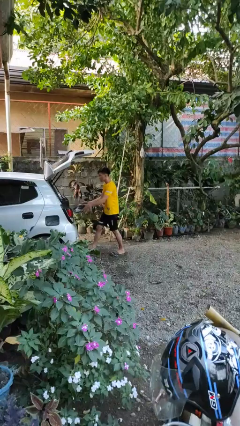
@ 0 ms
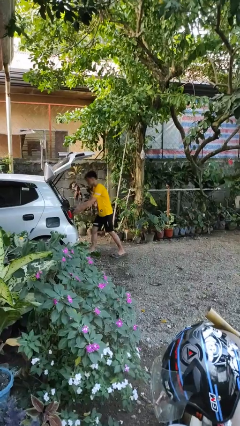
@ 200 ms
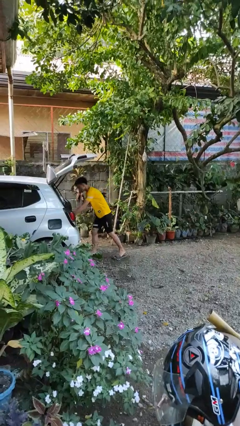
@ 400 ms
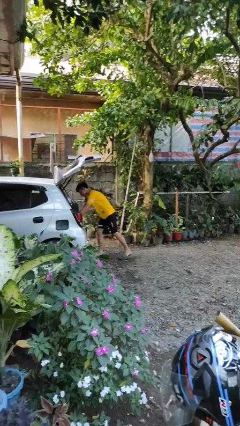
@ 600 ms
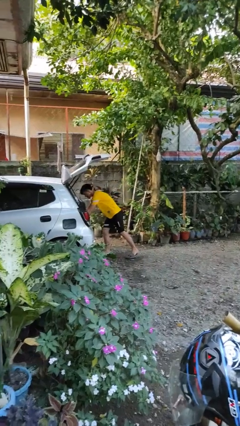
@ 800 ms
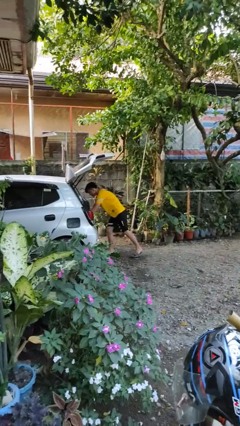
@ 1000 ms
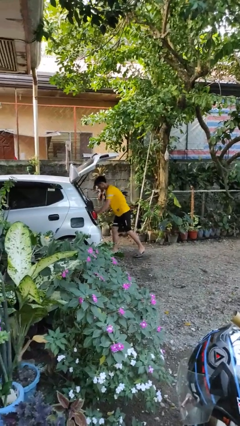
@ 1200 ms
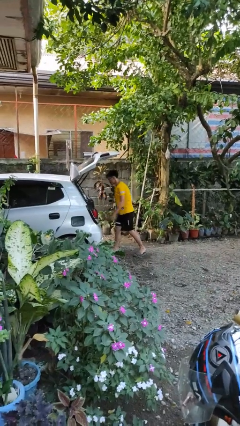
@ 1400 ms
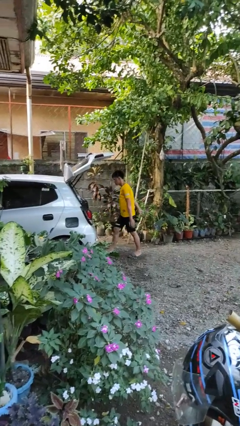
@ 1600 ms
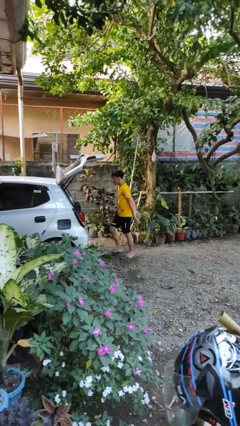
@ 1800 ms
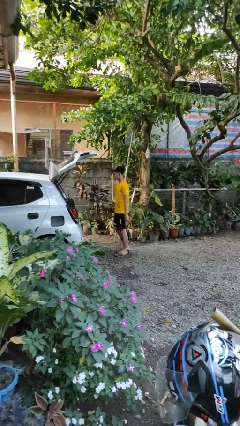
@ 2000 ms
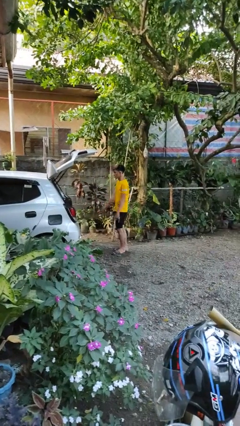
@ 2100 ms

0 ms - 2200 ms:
person loads car

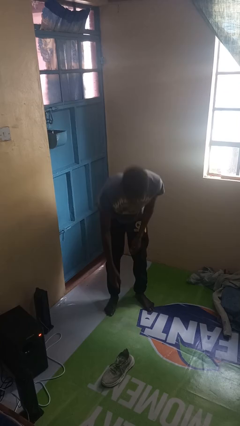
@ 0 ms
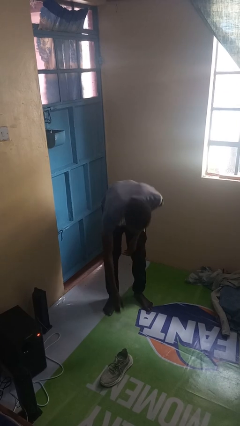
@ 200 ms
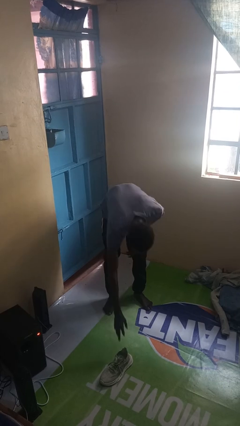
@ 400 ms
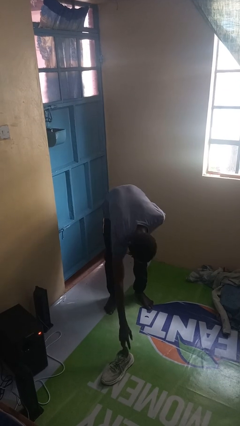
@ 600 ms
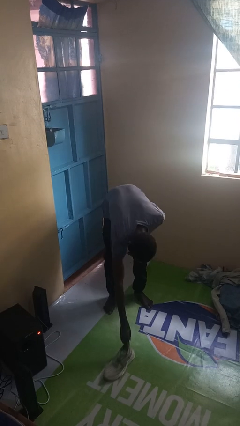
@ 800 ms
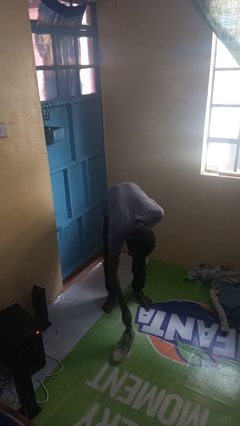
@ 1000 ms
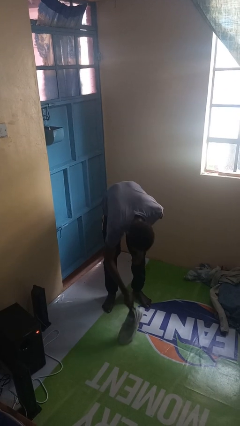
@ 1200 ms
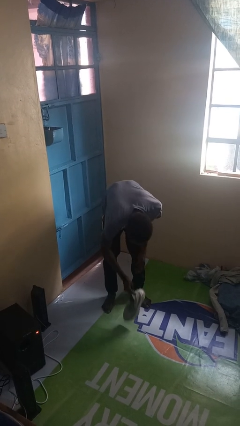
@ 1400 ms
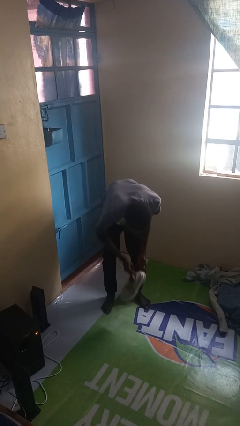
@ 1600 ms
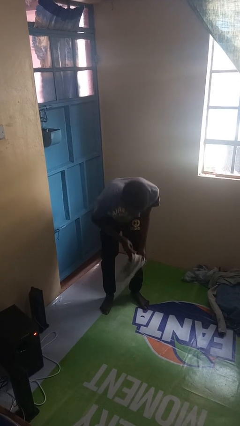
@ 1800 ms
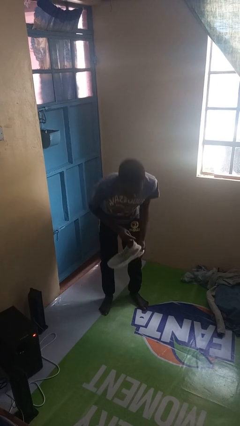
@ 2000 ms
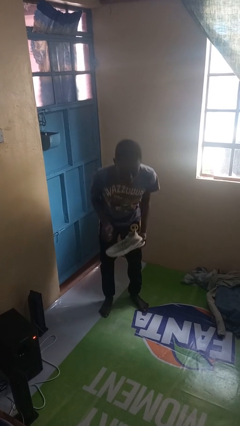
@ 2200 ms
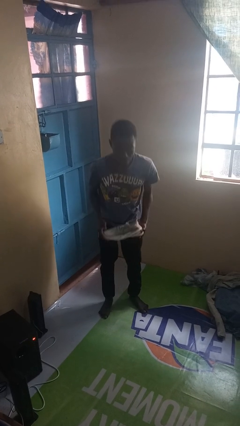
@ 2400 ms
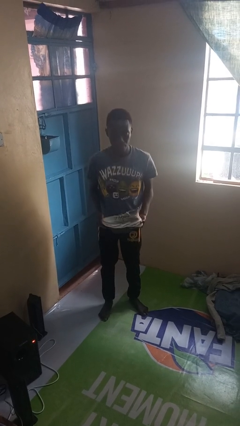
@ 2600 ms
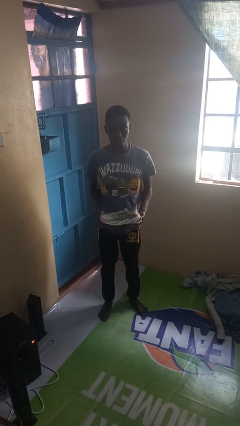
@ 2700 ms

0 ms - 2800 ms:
person picks up object from floor

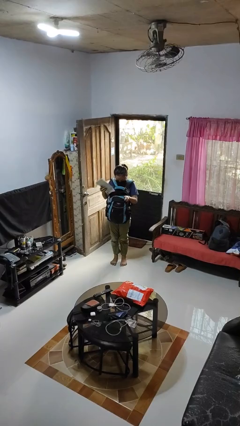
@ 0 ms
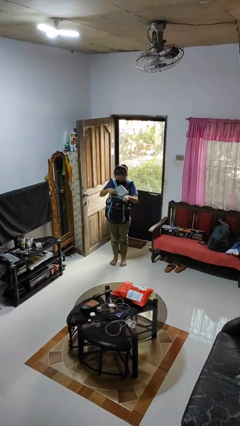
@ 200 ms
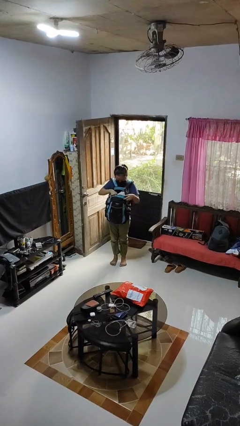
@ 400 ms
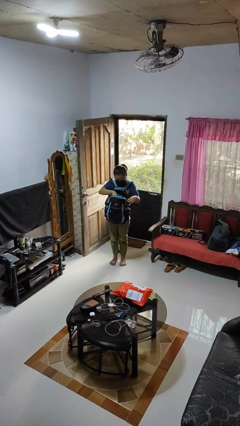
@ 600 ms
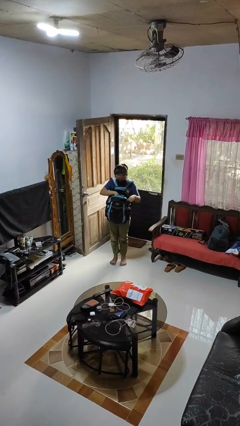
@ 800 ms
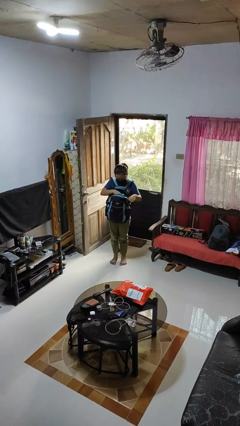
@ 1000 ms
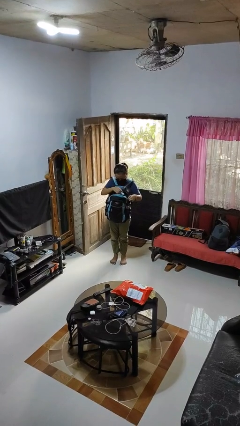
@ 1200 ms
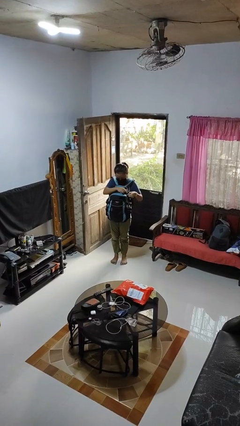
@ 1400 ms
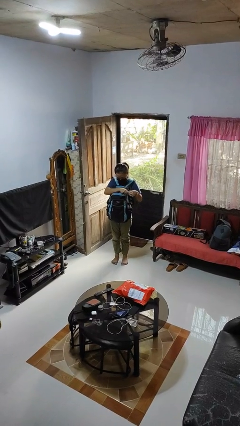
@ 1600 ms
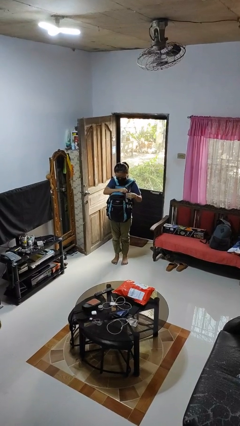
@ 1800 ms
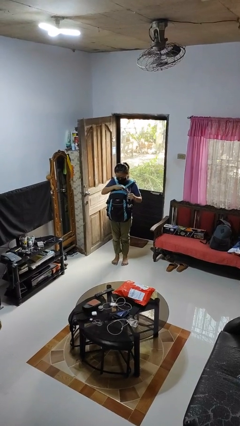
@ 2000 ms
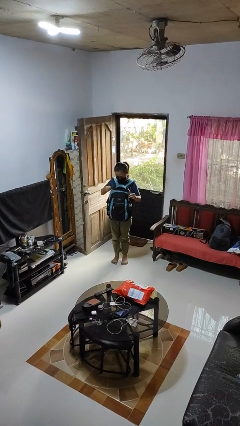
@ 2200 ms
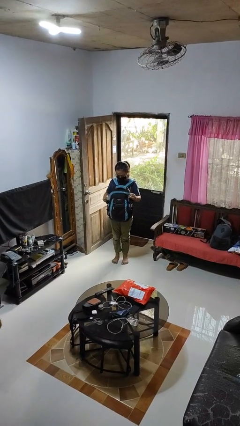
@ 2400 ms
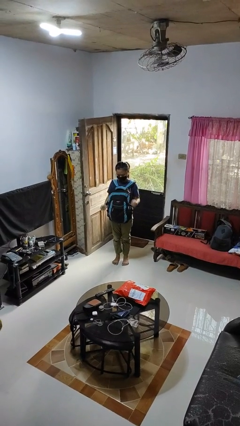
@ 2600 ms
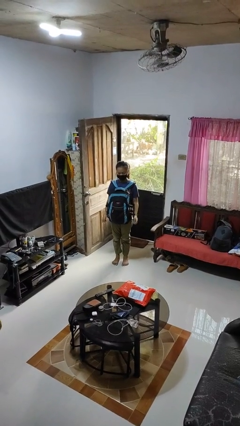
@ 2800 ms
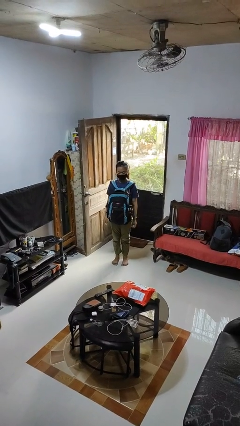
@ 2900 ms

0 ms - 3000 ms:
person puts object into backpack

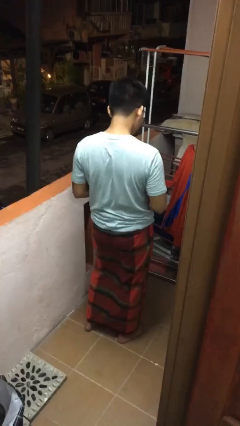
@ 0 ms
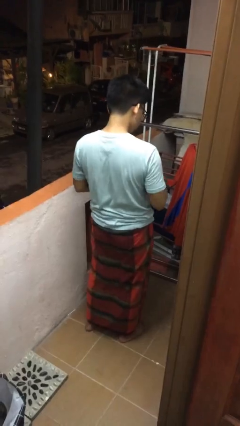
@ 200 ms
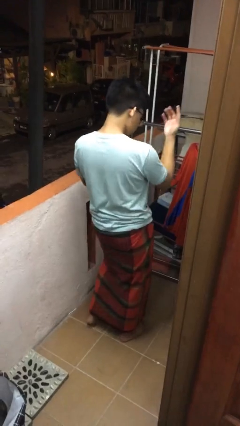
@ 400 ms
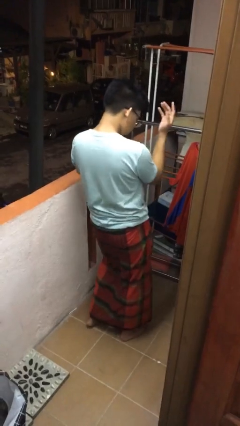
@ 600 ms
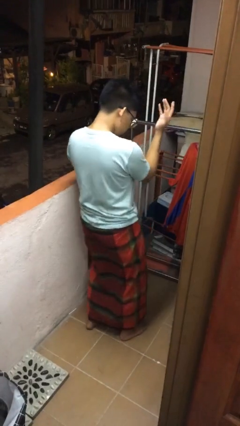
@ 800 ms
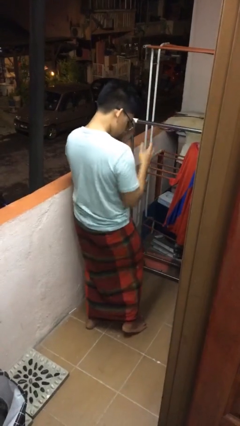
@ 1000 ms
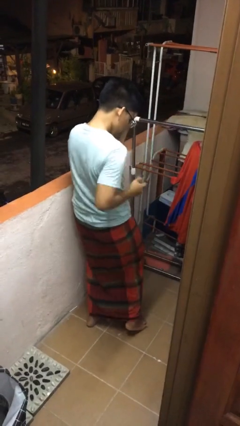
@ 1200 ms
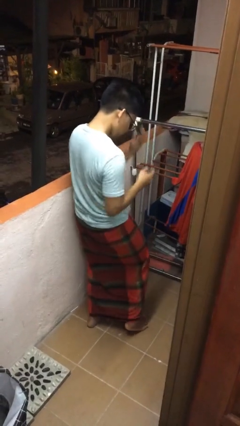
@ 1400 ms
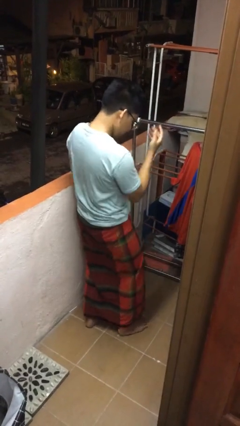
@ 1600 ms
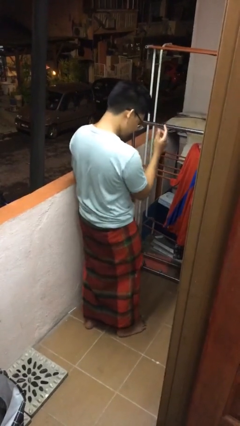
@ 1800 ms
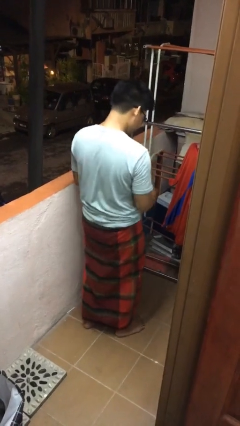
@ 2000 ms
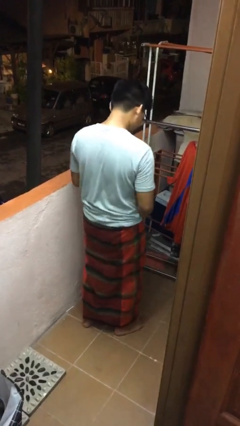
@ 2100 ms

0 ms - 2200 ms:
person dances in place

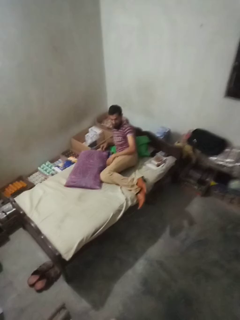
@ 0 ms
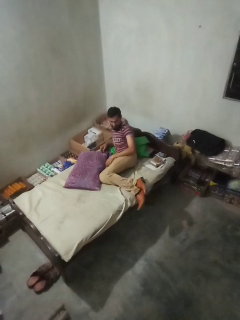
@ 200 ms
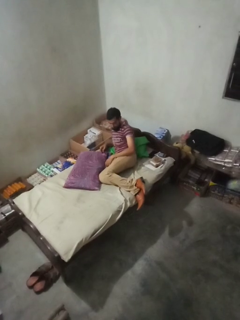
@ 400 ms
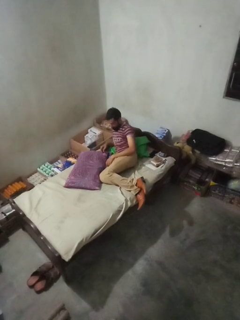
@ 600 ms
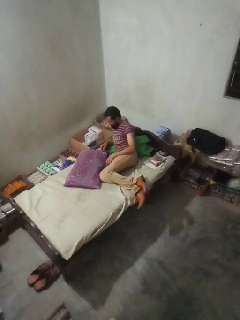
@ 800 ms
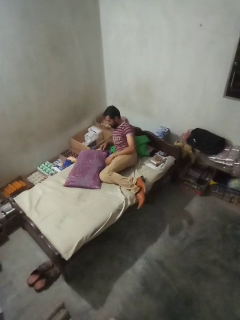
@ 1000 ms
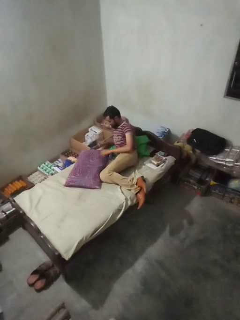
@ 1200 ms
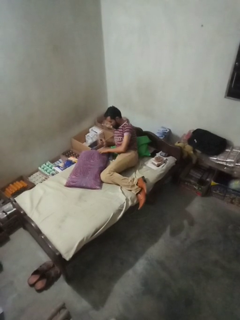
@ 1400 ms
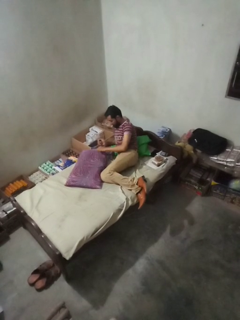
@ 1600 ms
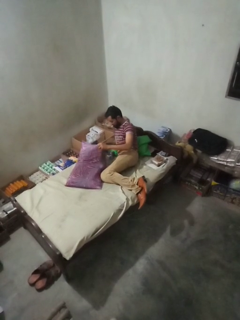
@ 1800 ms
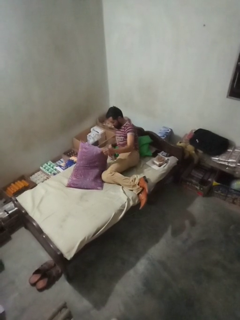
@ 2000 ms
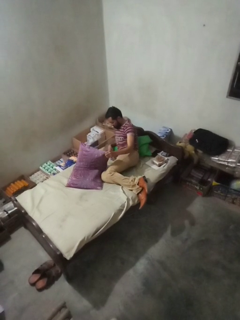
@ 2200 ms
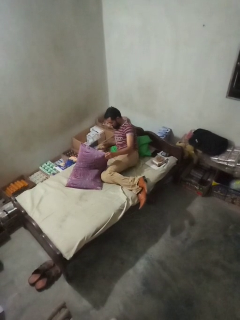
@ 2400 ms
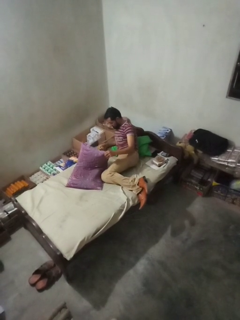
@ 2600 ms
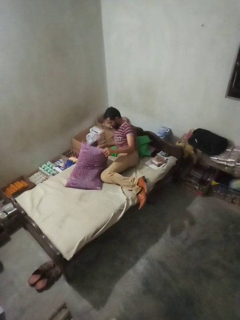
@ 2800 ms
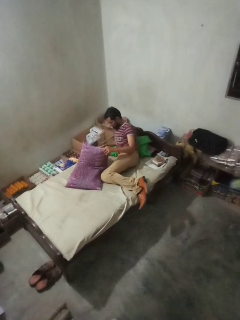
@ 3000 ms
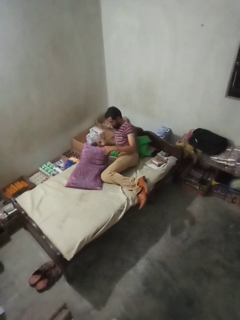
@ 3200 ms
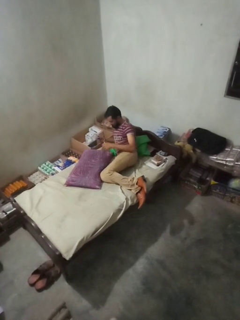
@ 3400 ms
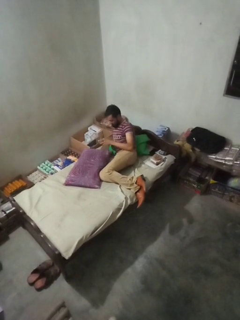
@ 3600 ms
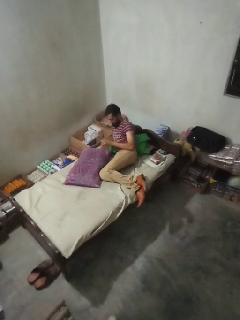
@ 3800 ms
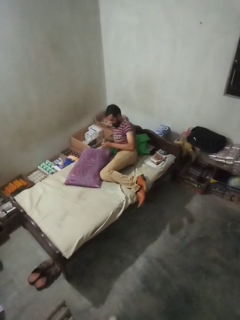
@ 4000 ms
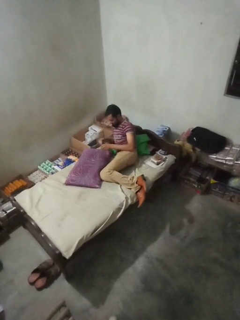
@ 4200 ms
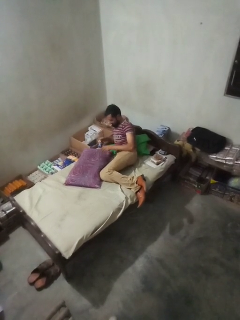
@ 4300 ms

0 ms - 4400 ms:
person searches under bed

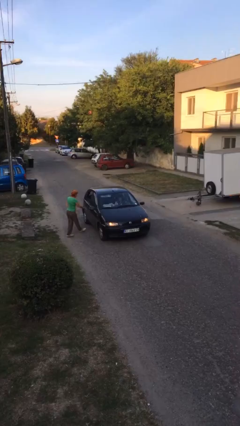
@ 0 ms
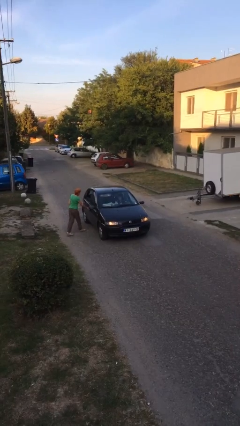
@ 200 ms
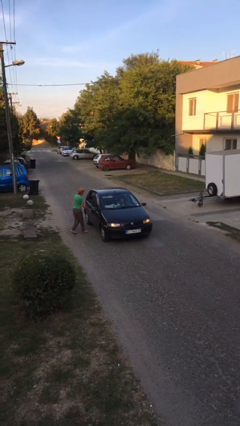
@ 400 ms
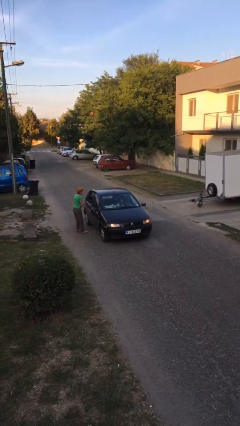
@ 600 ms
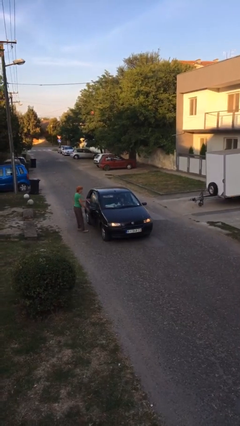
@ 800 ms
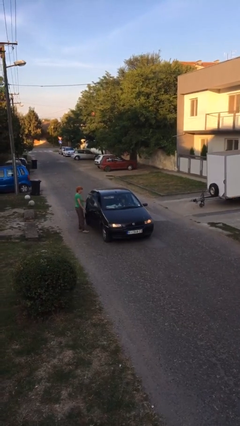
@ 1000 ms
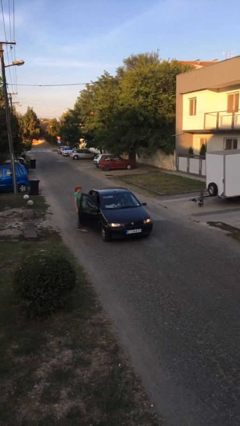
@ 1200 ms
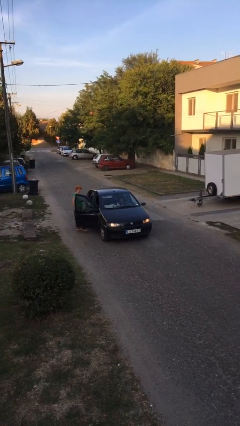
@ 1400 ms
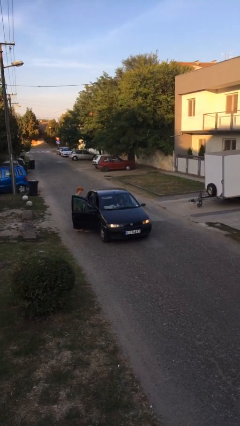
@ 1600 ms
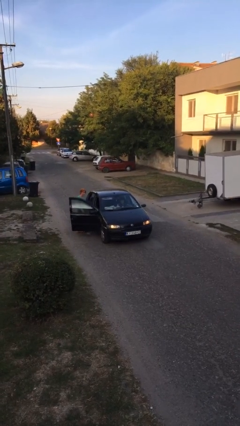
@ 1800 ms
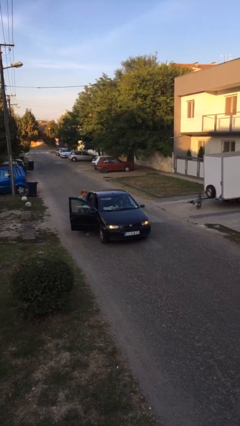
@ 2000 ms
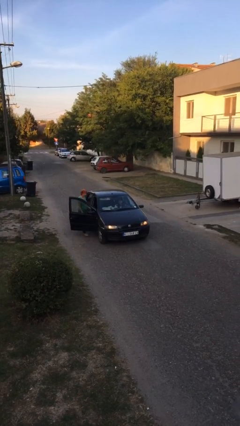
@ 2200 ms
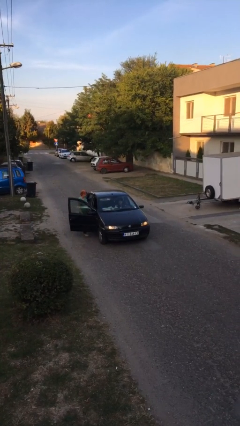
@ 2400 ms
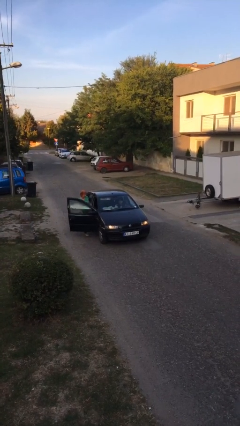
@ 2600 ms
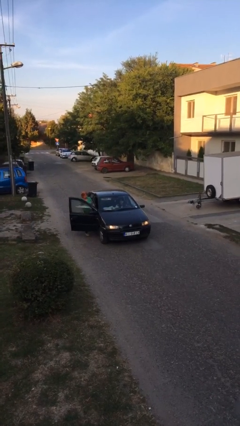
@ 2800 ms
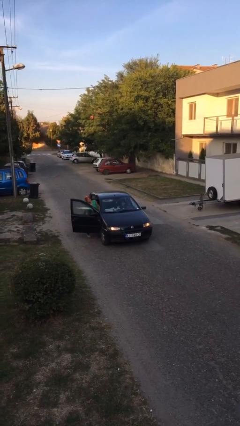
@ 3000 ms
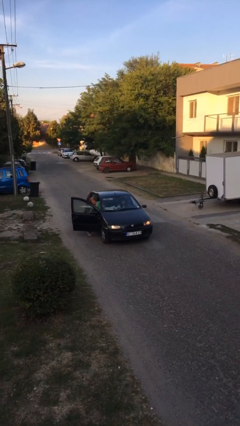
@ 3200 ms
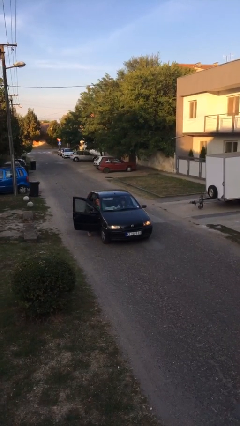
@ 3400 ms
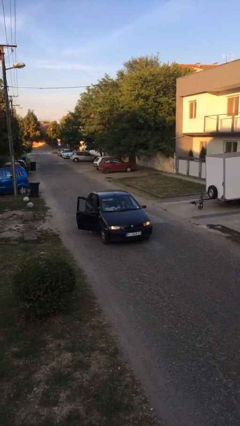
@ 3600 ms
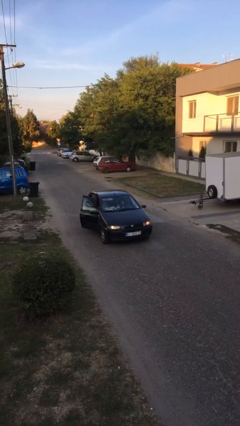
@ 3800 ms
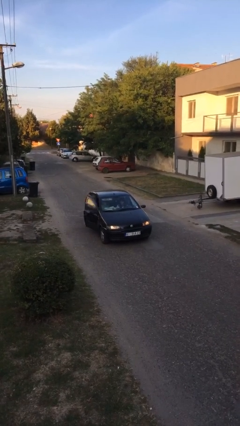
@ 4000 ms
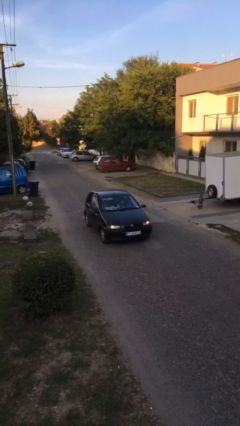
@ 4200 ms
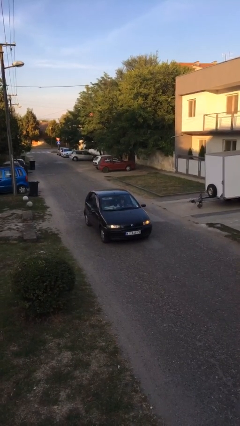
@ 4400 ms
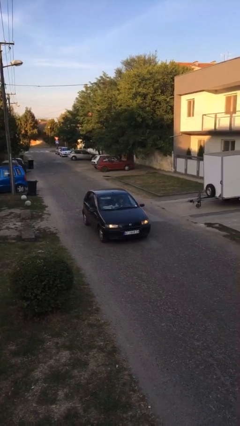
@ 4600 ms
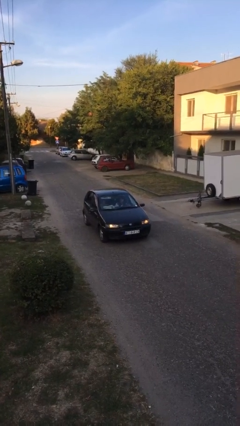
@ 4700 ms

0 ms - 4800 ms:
car picks up person
